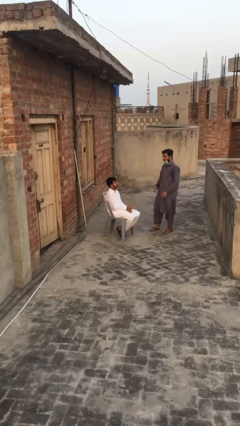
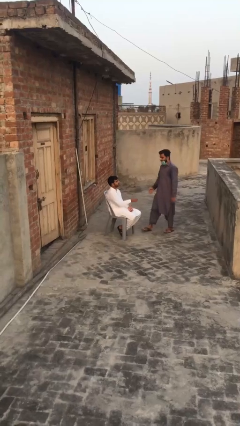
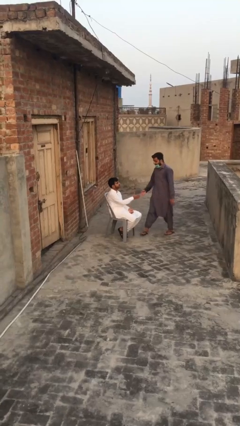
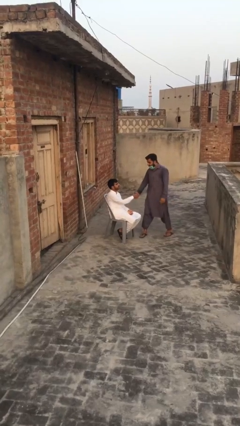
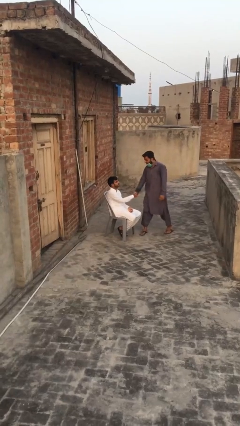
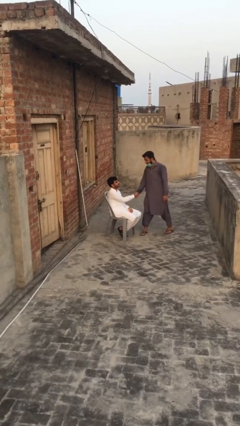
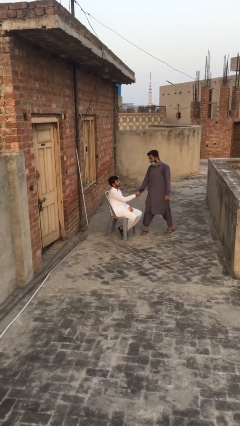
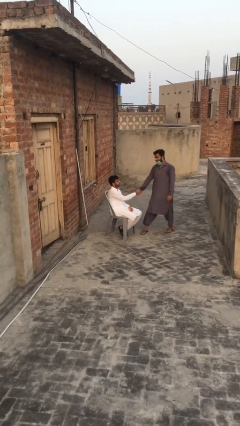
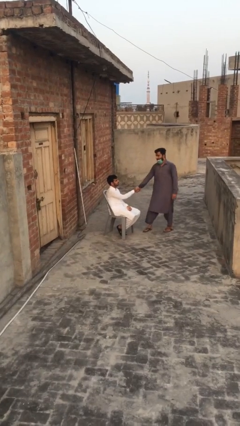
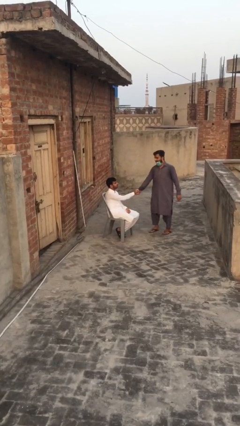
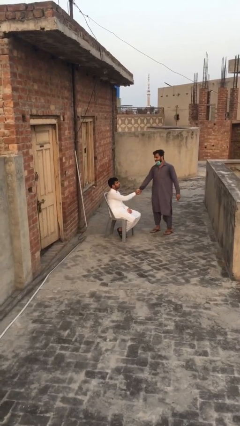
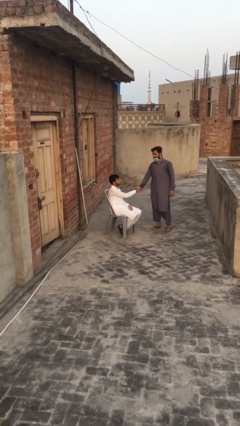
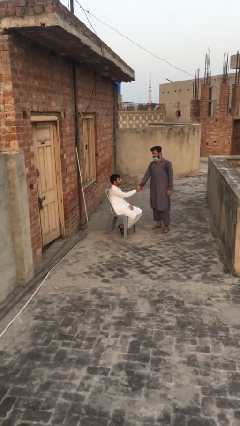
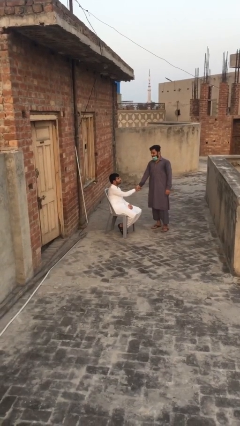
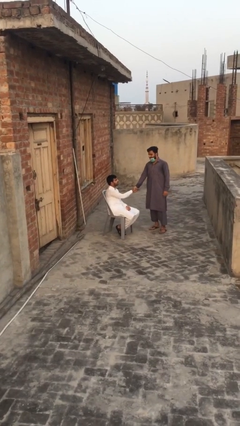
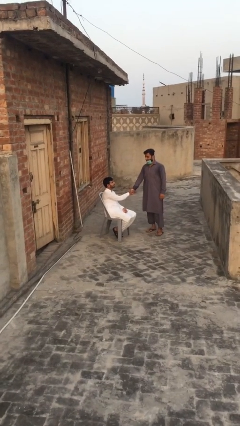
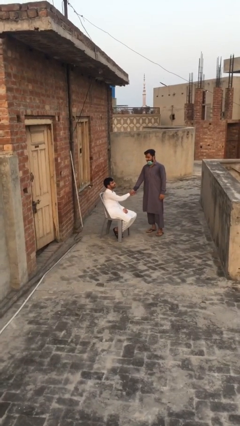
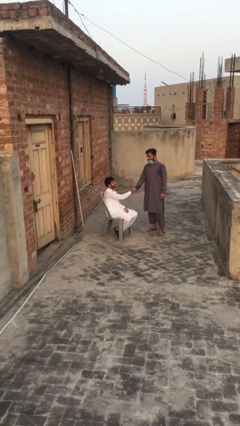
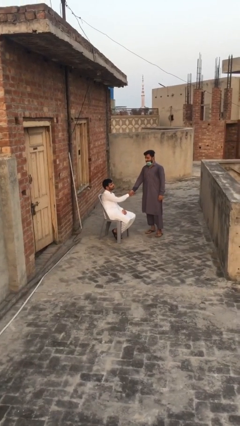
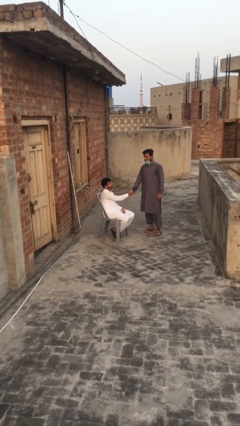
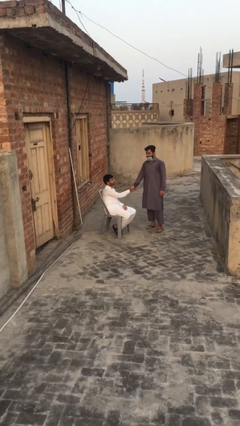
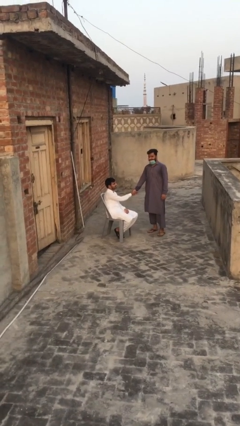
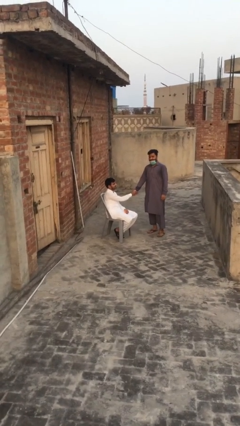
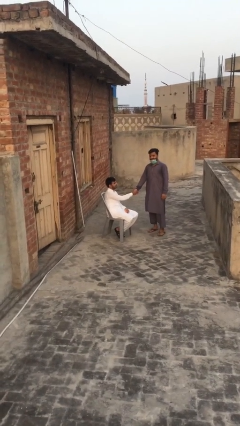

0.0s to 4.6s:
person shakes hand

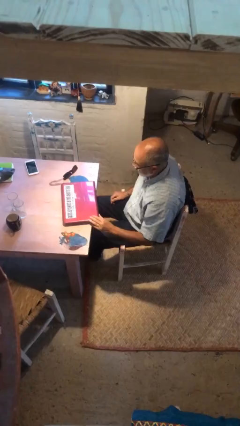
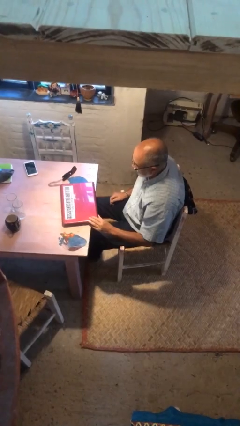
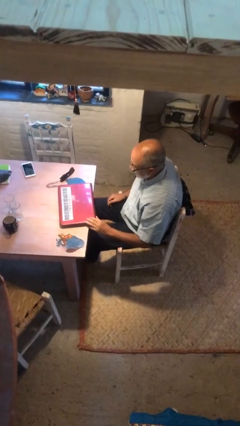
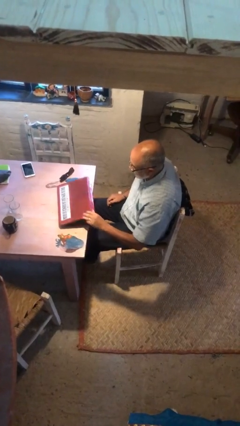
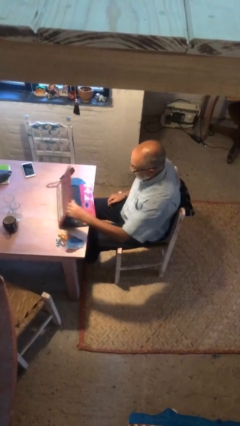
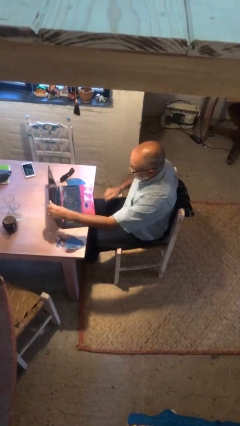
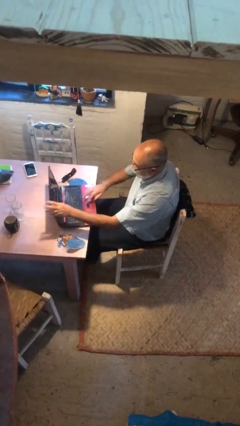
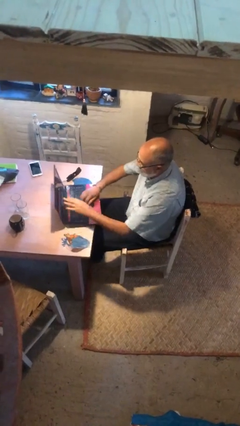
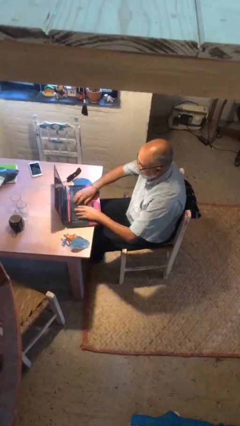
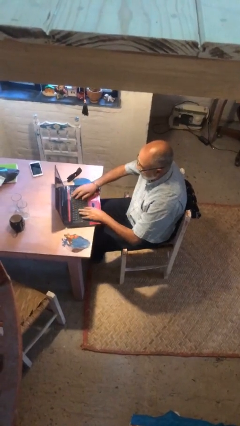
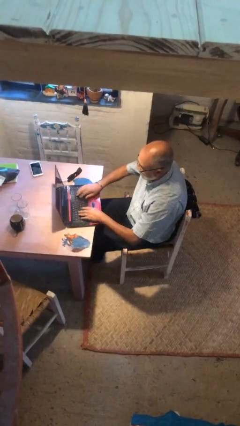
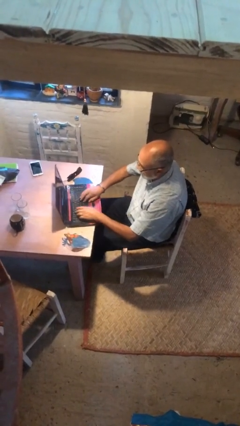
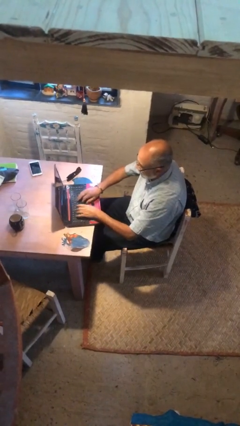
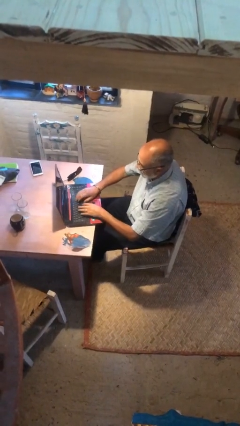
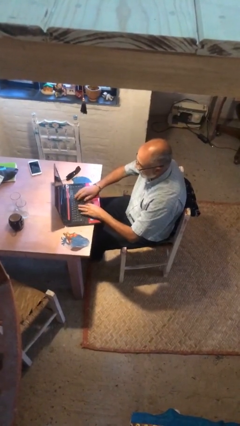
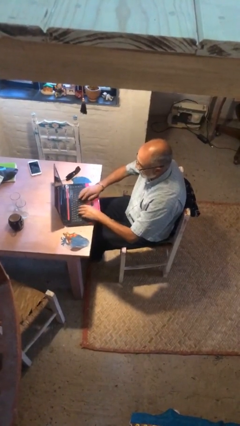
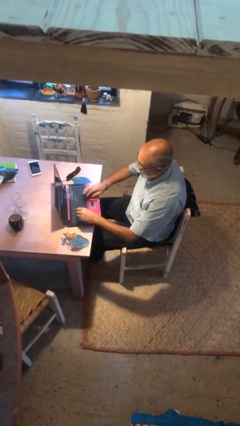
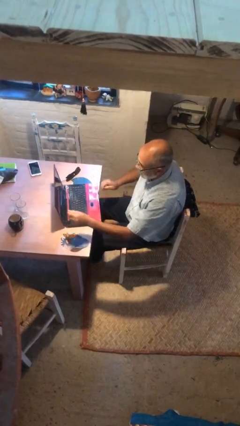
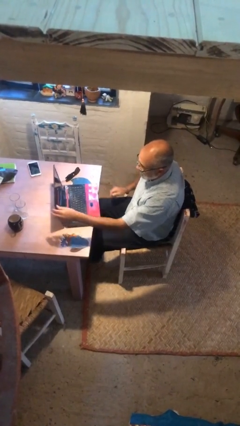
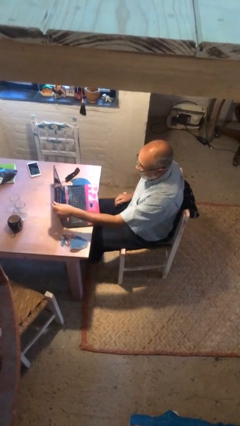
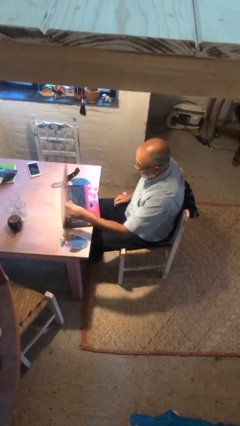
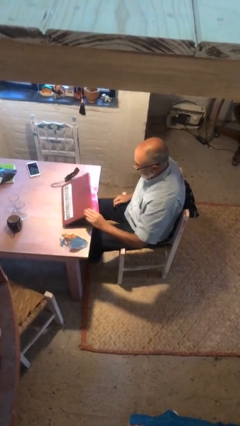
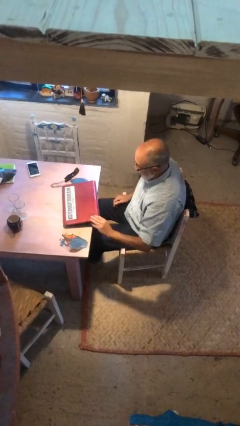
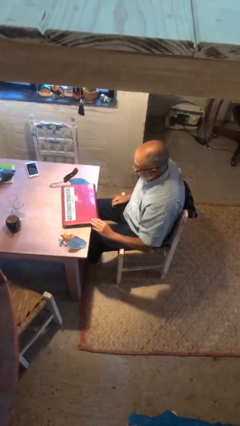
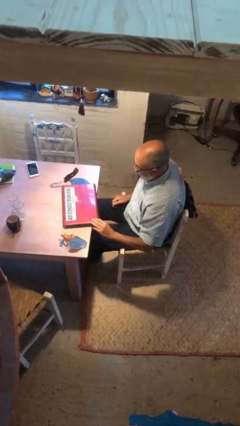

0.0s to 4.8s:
person interacts with laptop

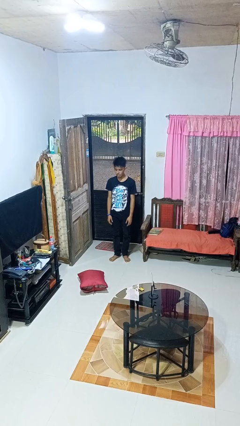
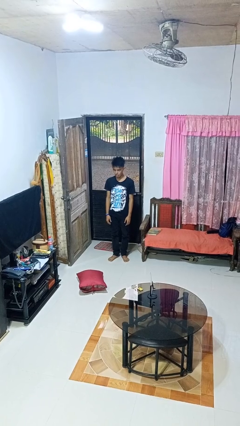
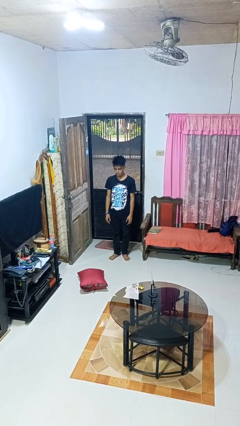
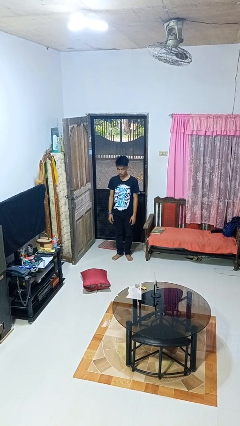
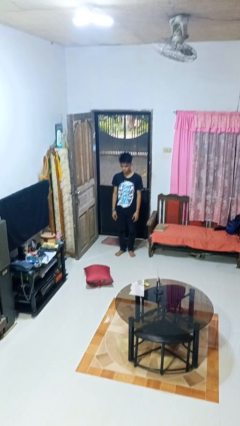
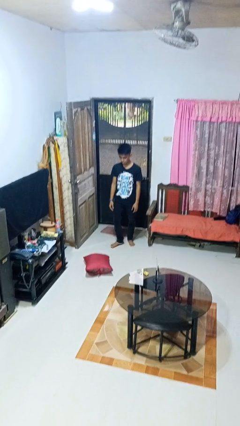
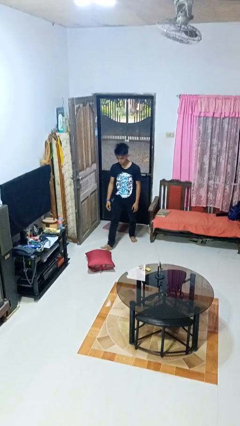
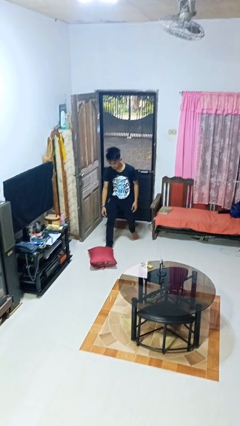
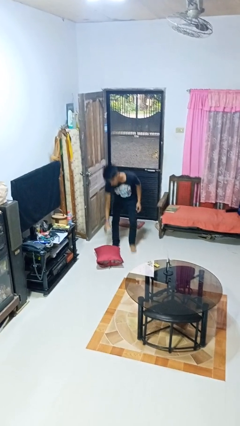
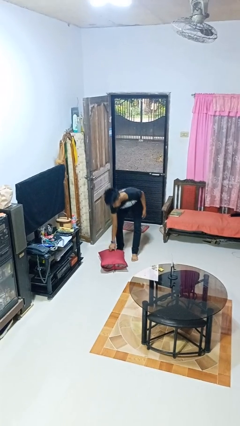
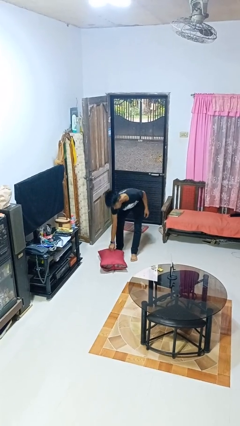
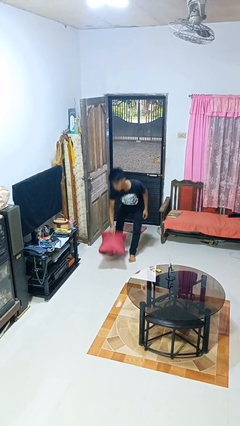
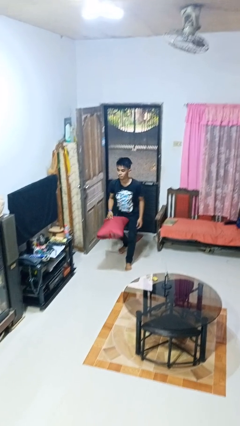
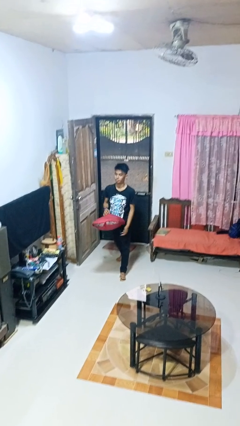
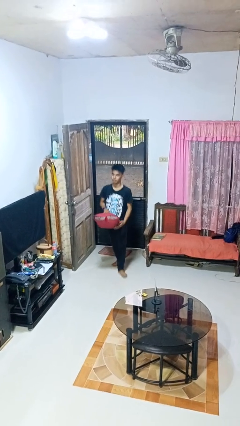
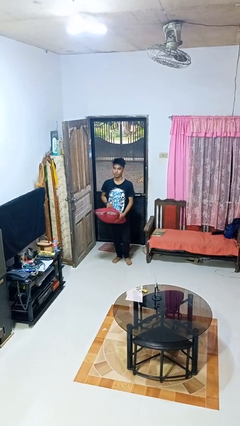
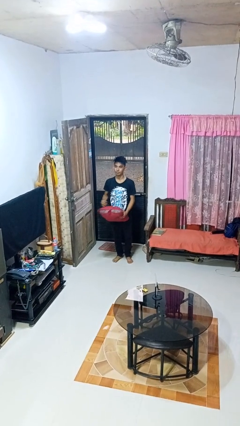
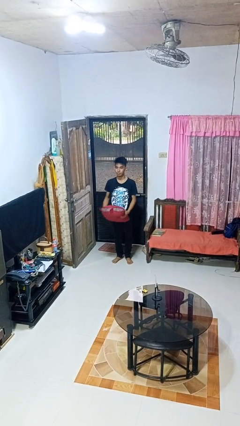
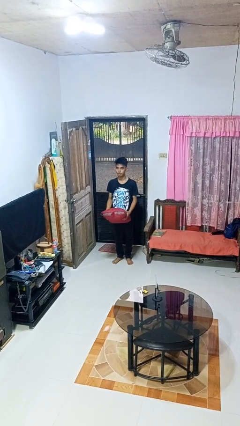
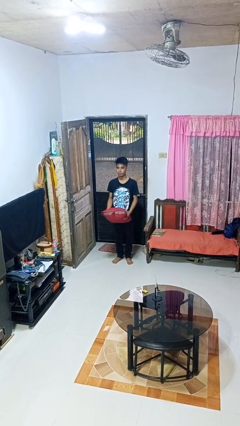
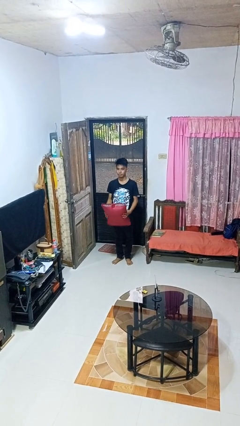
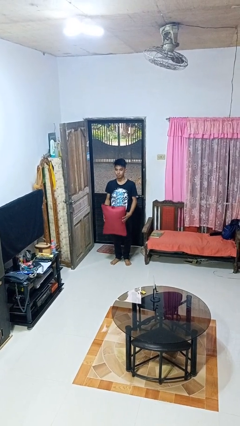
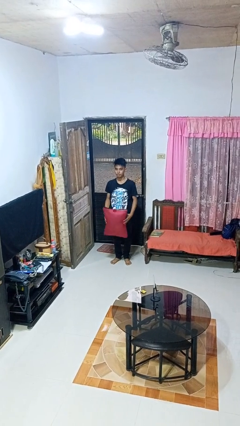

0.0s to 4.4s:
person picks up object from floor

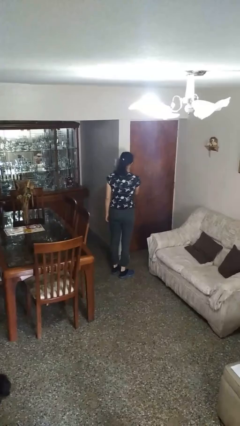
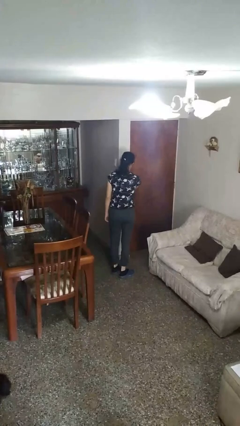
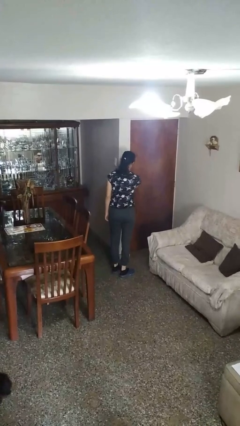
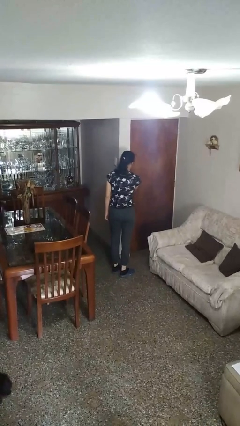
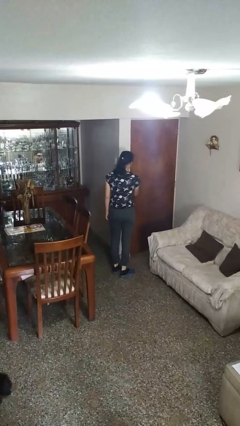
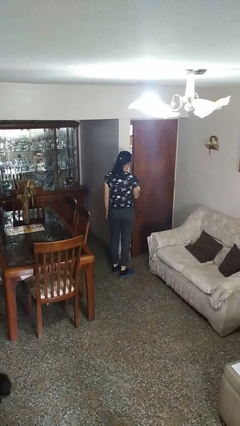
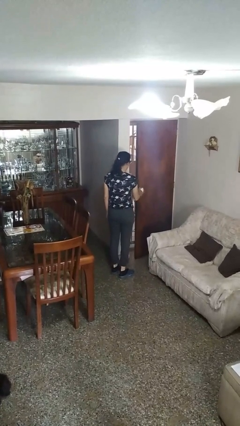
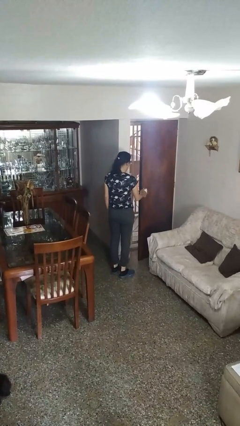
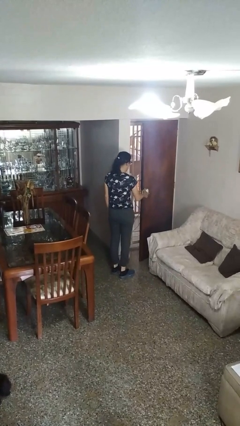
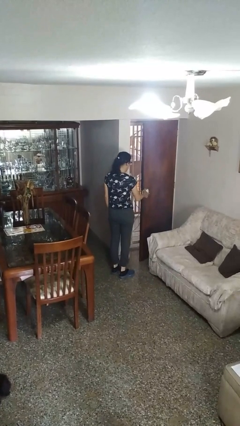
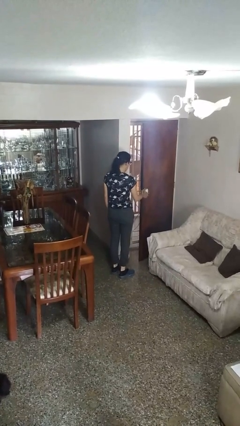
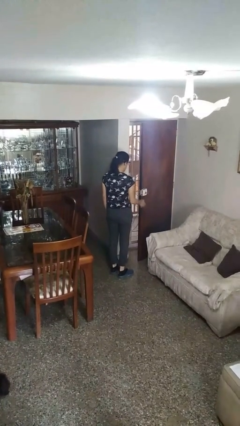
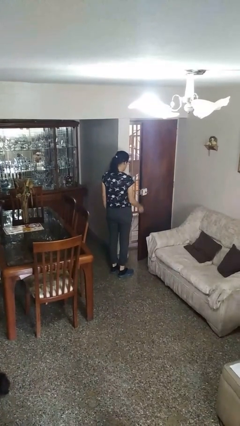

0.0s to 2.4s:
person opens facility door

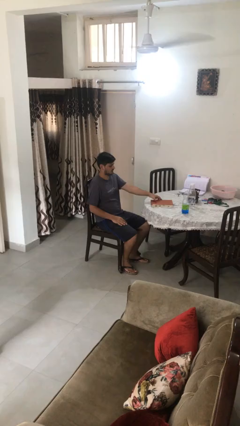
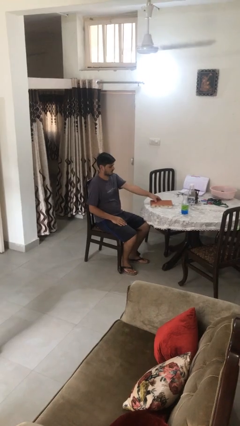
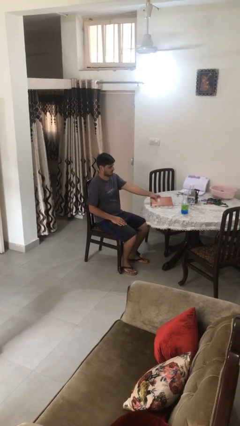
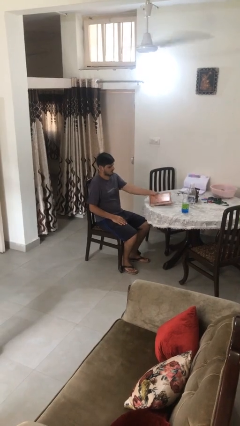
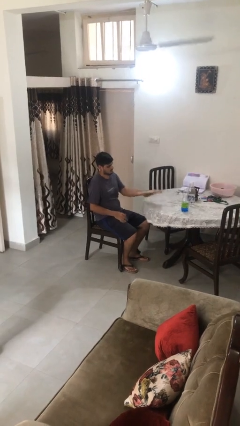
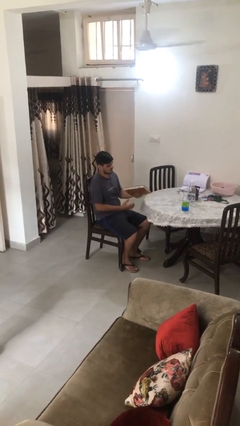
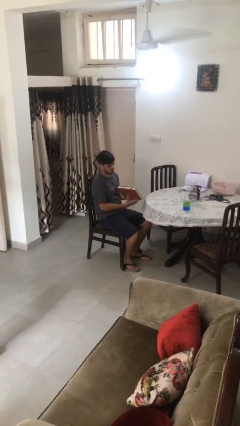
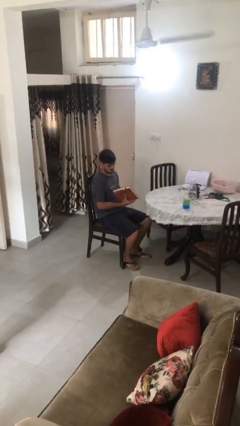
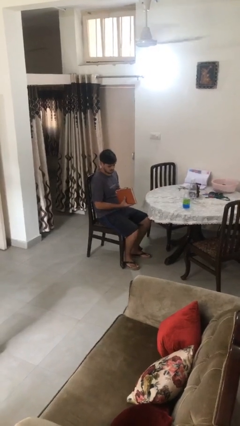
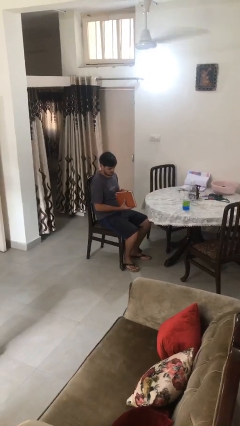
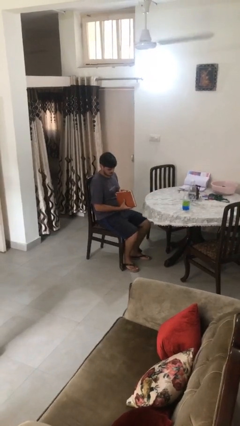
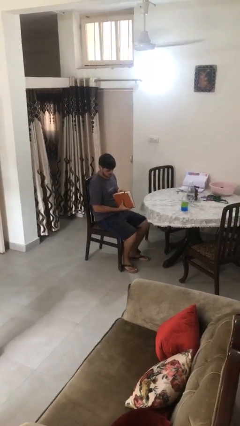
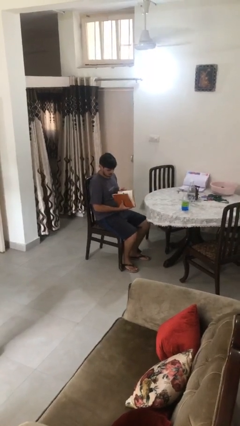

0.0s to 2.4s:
person picks up object from table
